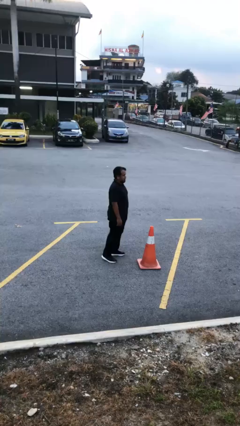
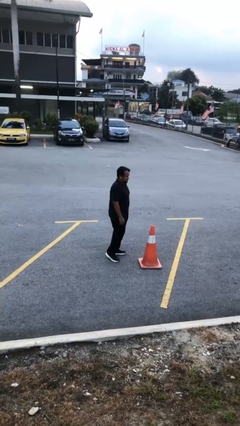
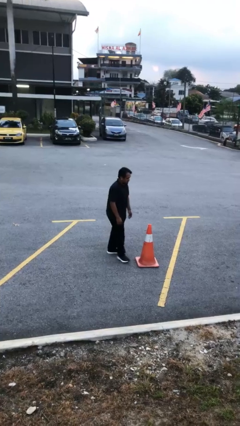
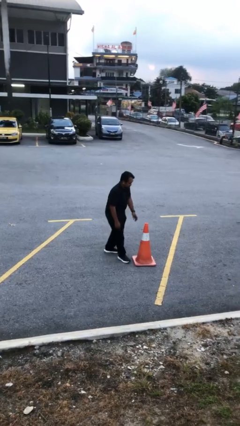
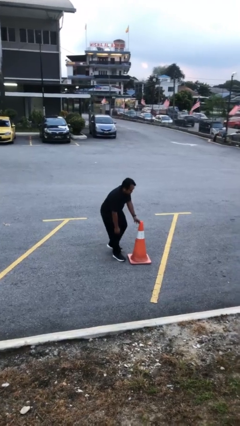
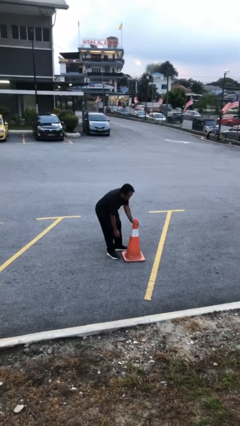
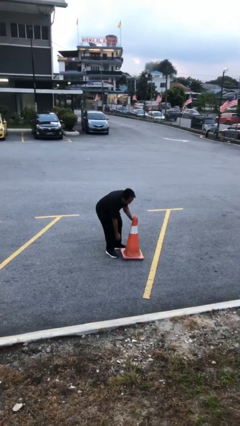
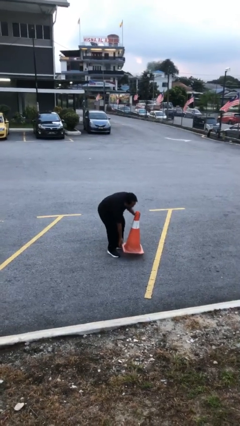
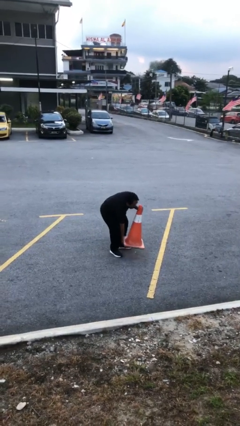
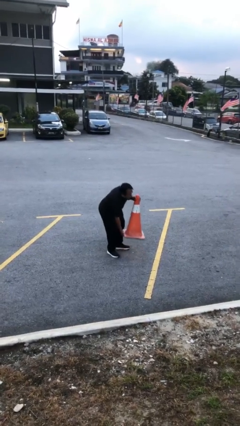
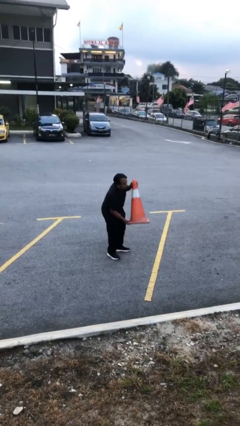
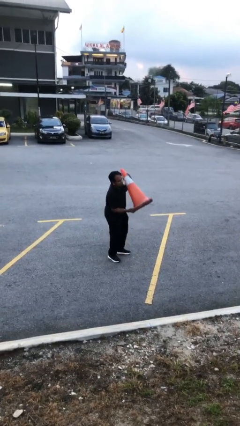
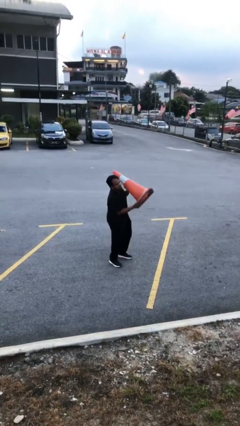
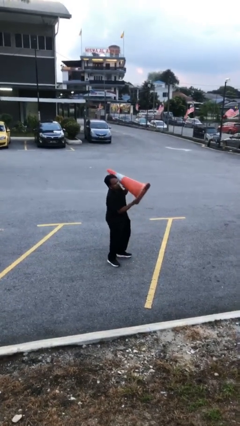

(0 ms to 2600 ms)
person picks up object from floor

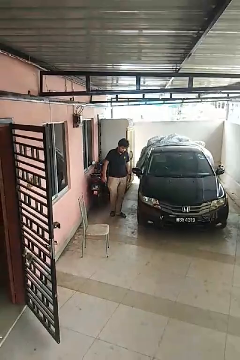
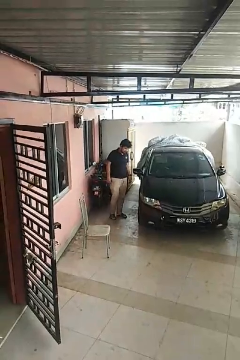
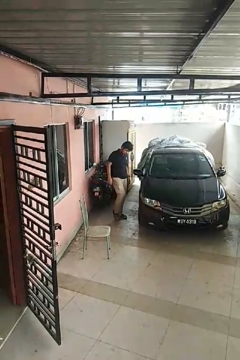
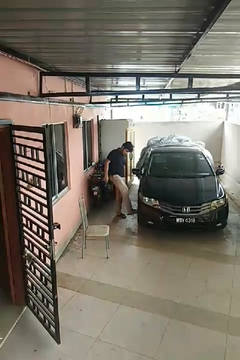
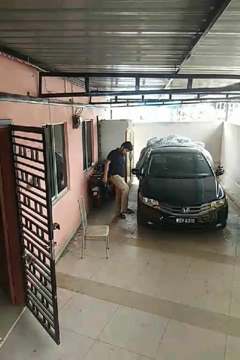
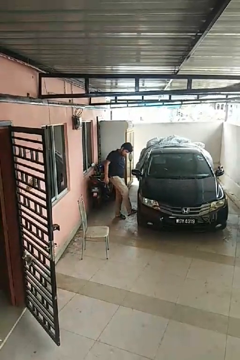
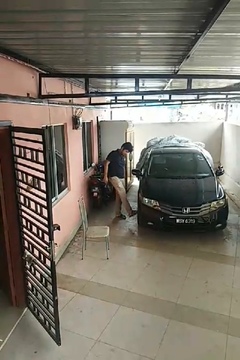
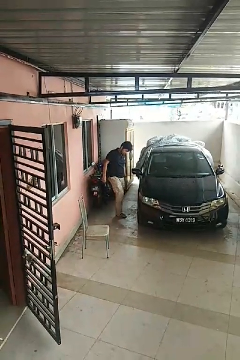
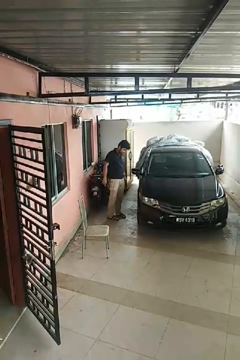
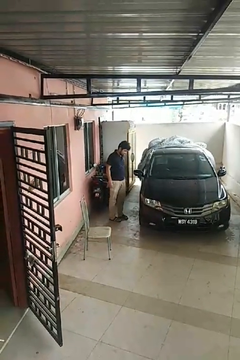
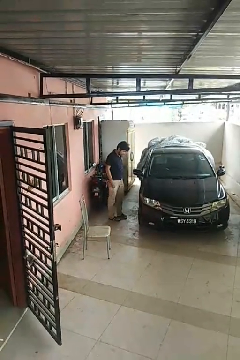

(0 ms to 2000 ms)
person kicks car tires

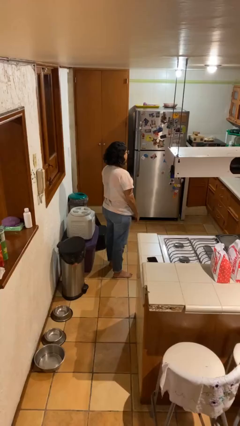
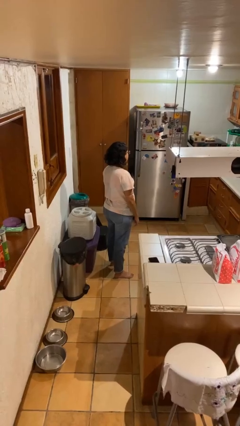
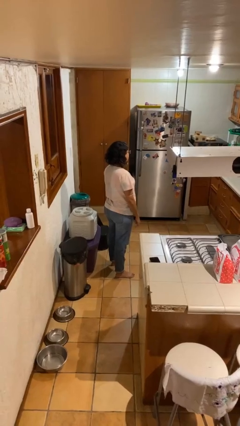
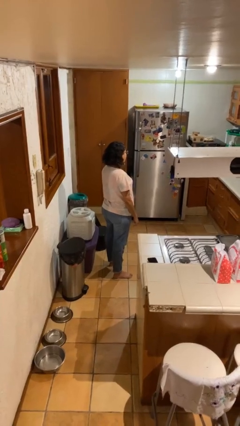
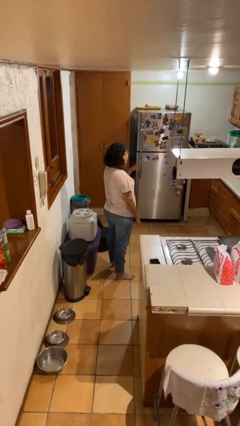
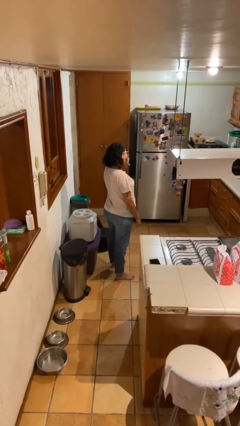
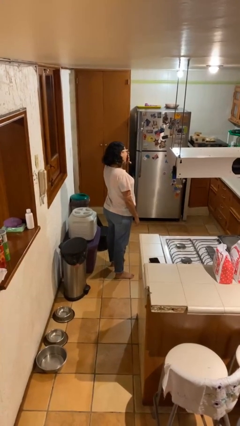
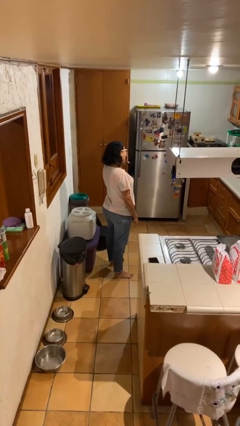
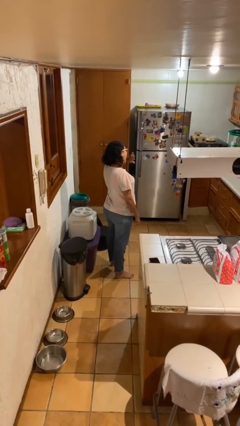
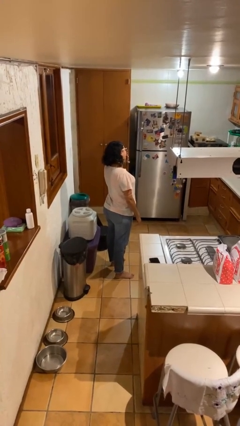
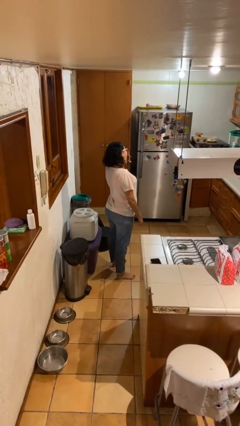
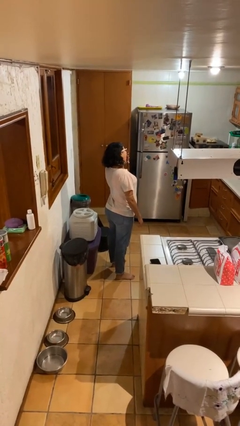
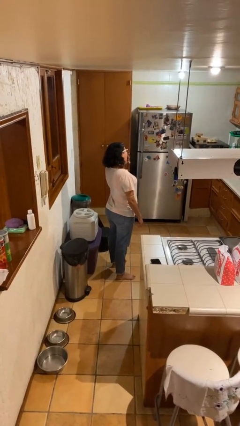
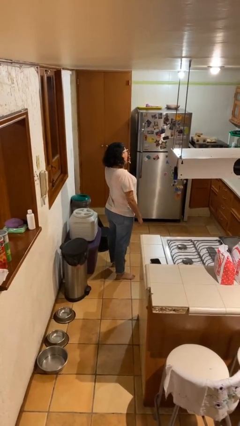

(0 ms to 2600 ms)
person yawns

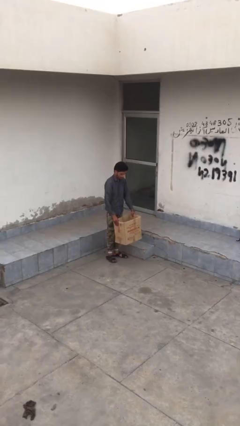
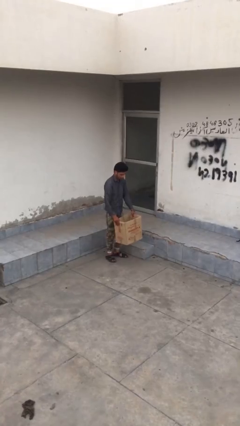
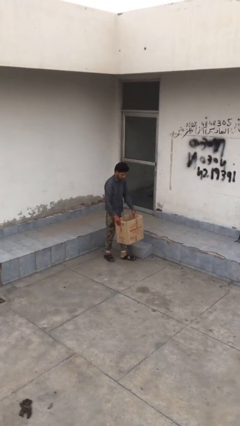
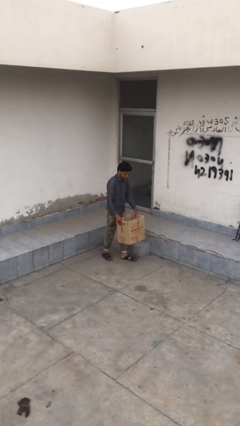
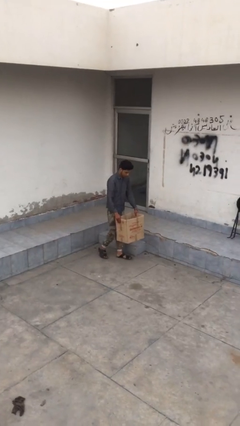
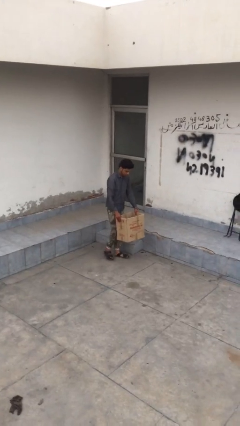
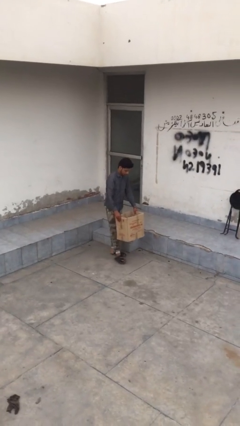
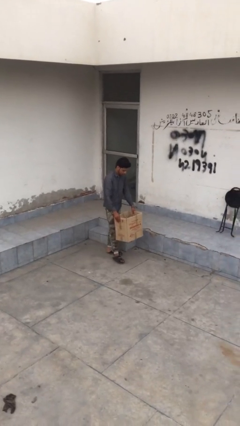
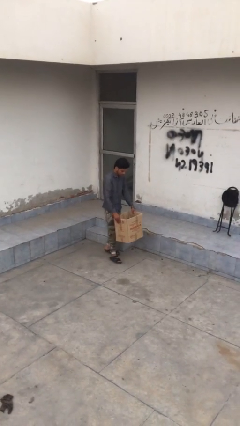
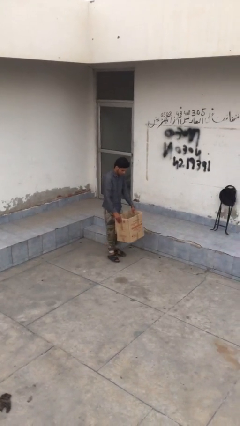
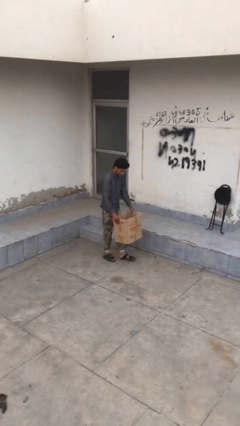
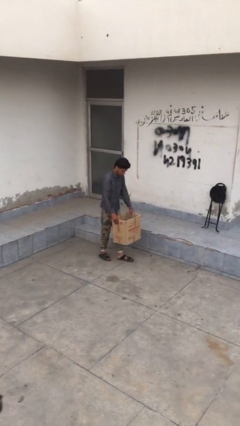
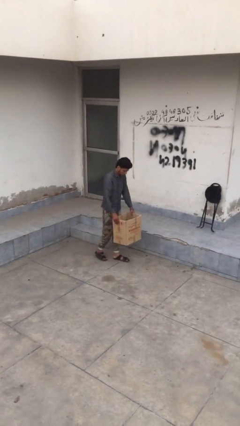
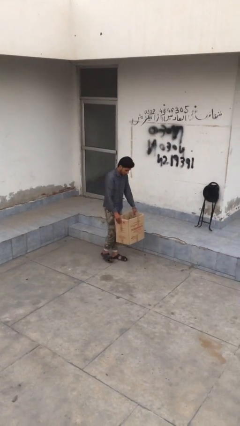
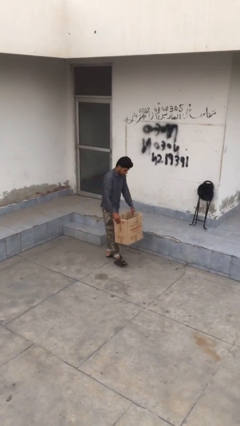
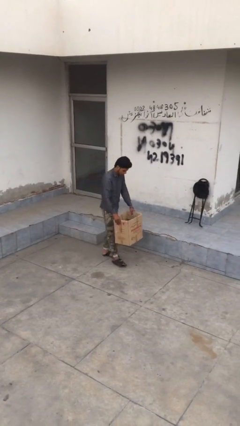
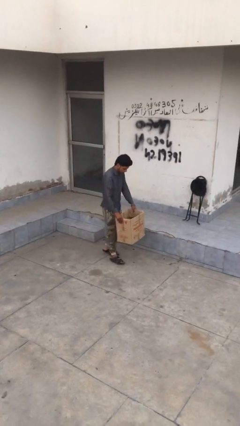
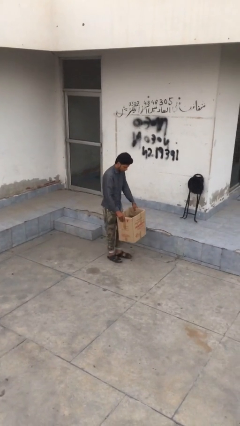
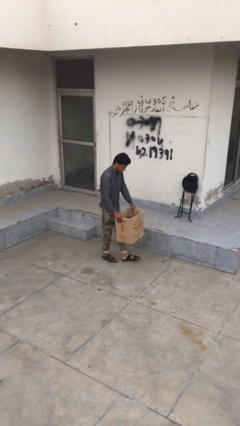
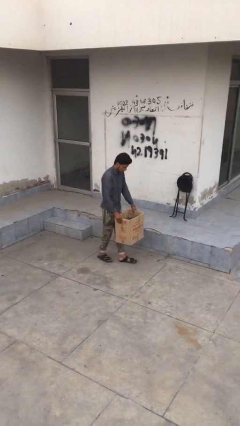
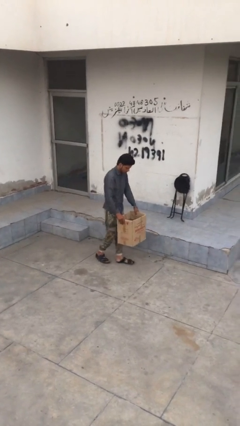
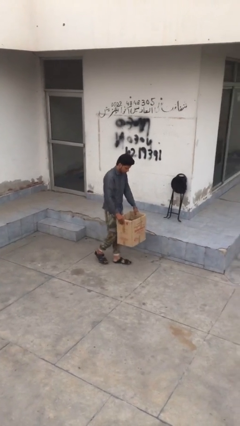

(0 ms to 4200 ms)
person carries heavy object

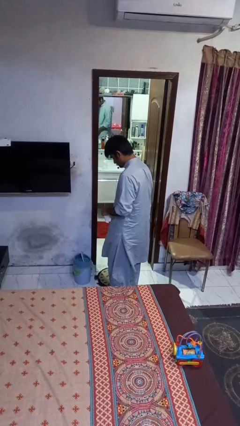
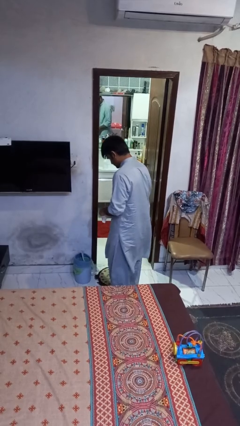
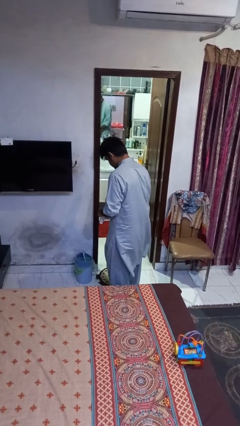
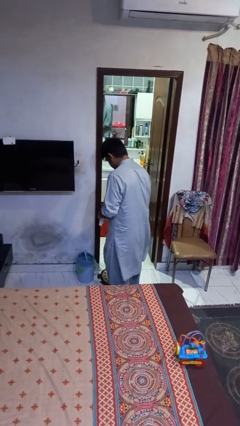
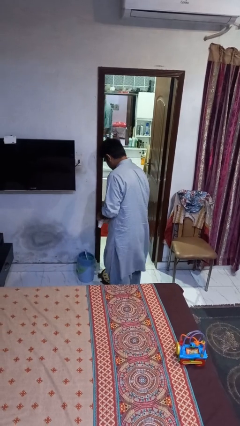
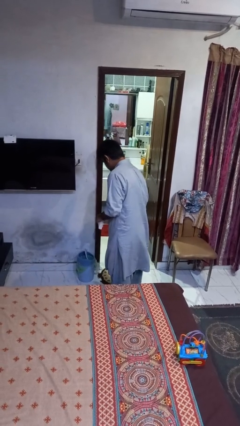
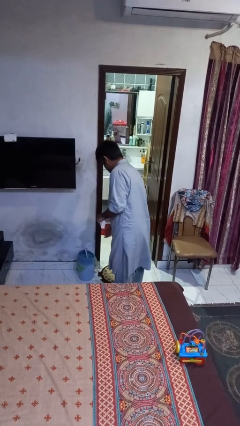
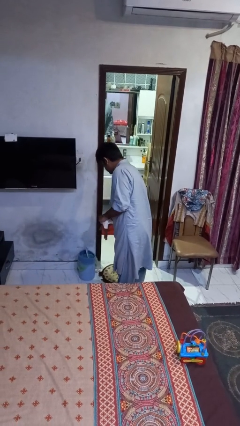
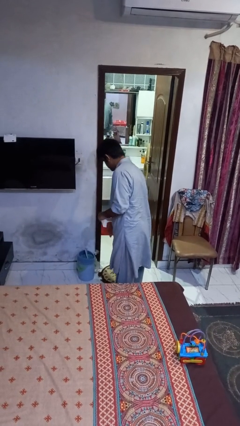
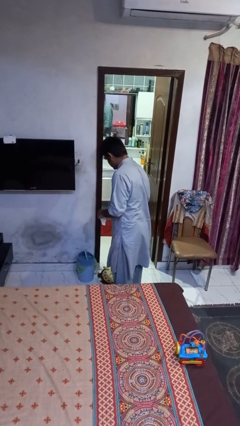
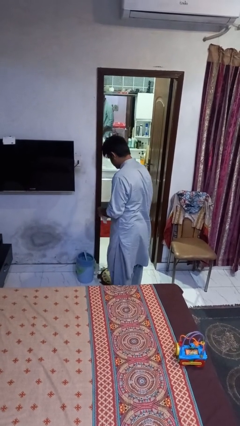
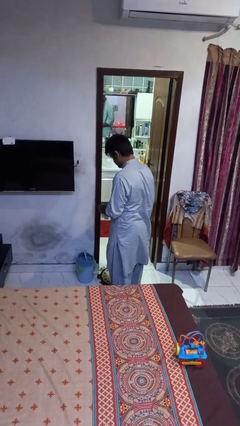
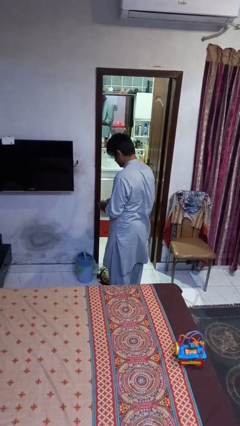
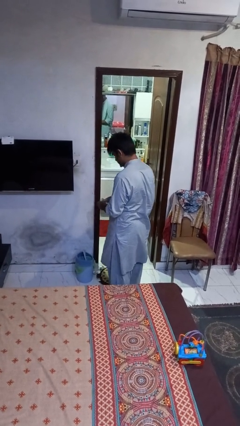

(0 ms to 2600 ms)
person discards trash

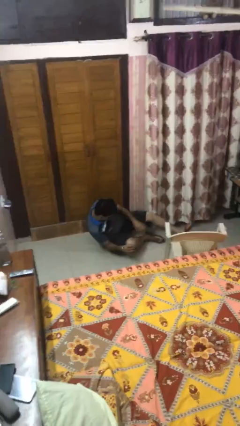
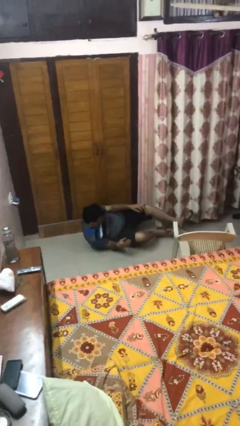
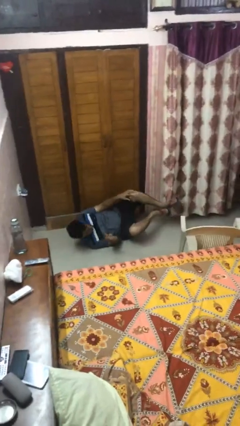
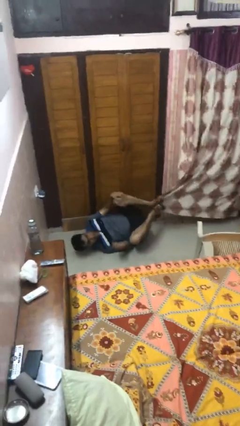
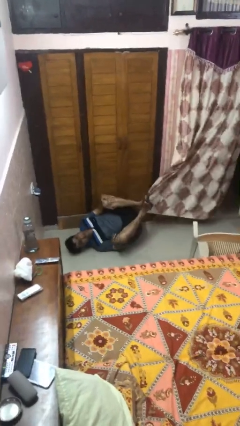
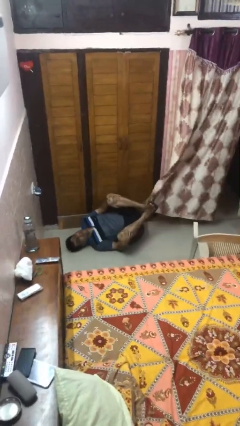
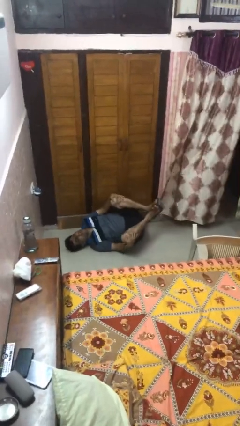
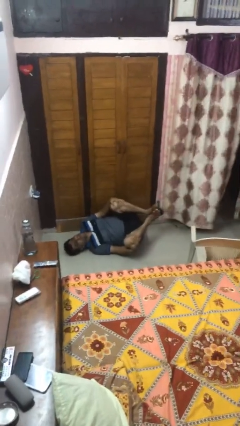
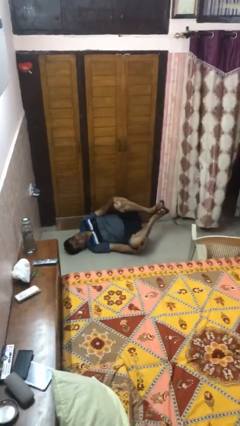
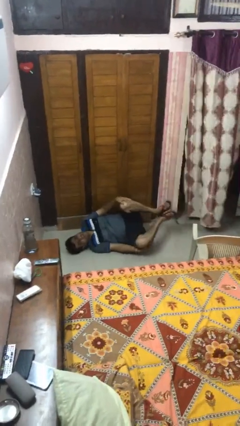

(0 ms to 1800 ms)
person lies down on floor

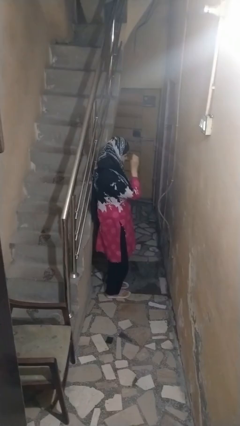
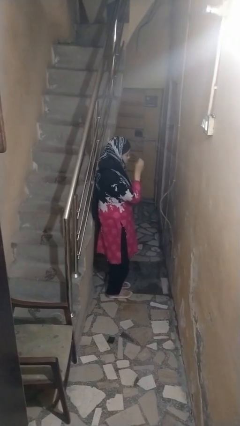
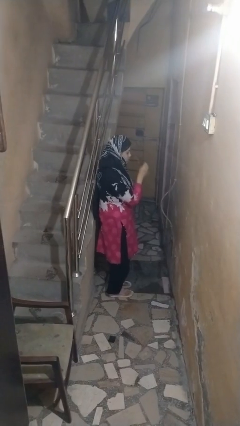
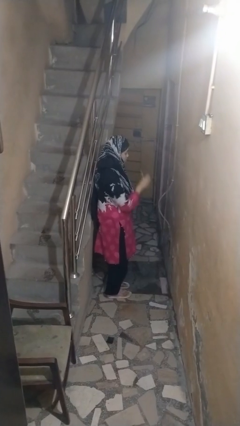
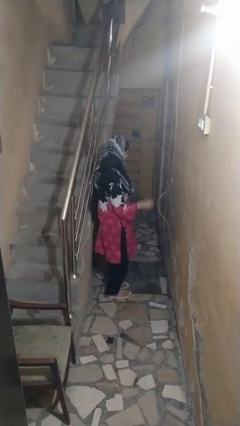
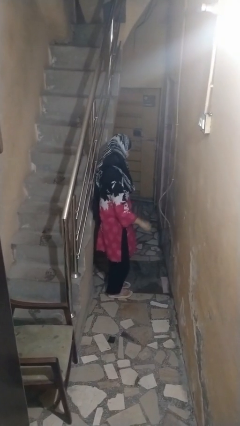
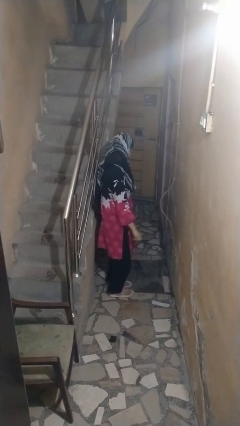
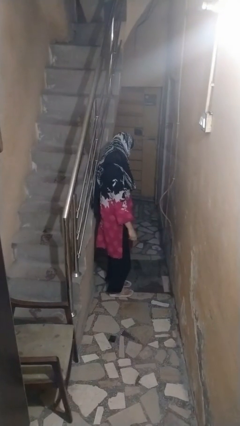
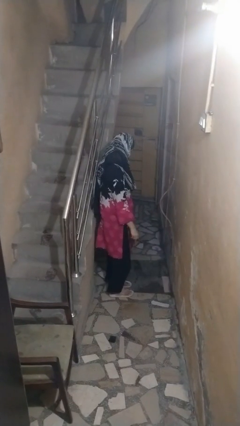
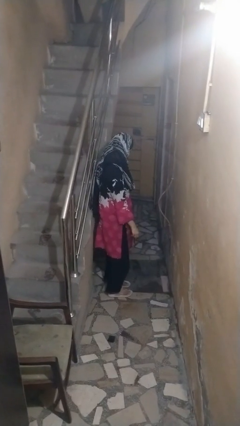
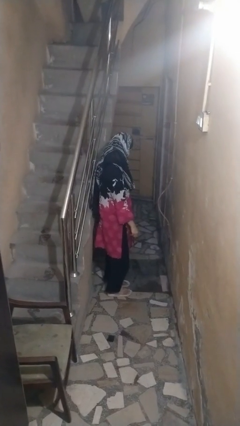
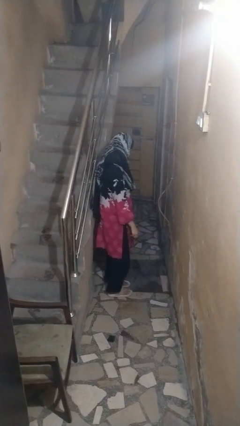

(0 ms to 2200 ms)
person takes off glasses
